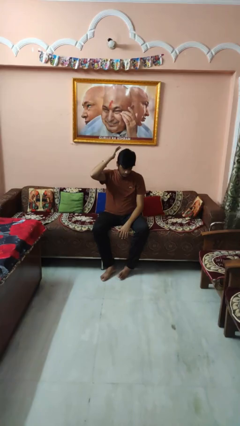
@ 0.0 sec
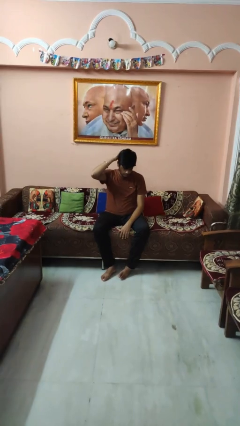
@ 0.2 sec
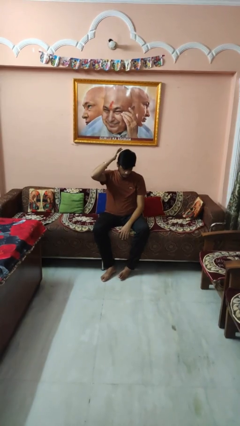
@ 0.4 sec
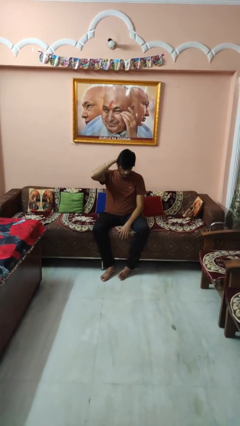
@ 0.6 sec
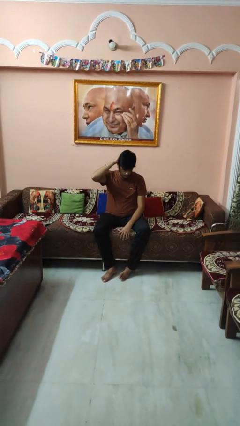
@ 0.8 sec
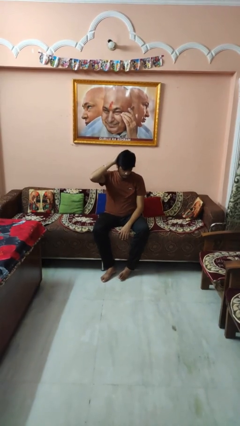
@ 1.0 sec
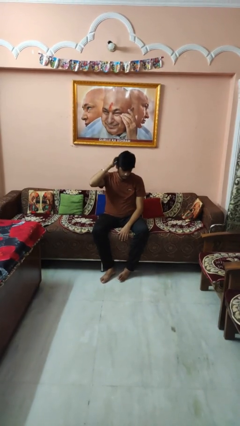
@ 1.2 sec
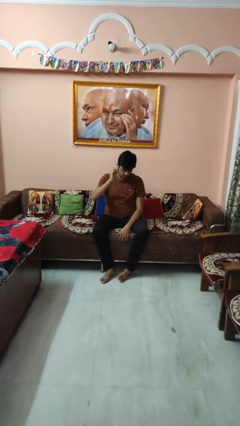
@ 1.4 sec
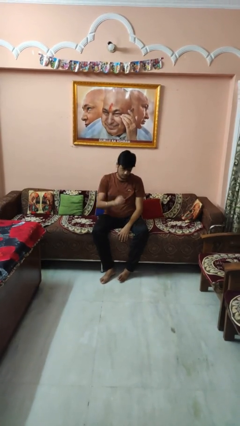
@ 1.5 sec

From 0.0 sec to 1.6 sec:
person pats head

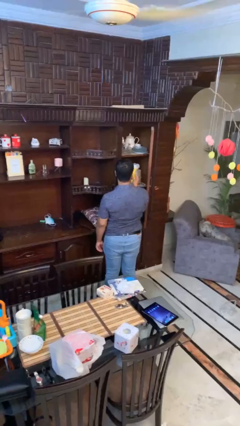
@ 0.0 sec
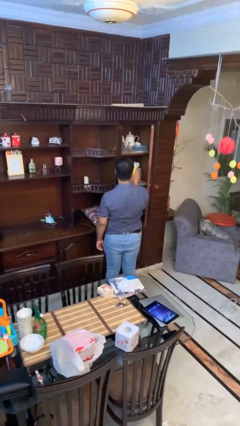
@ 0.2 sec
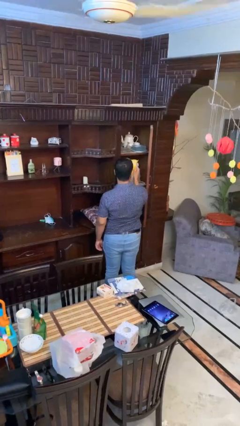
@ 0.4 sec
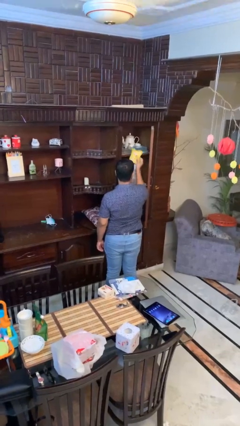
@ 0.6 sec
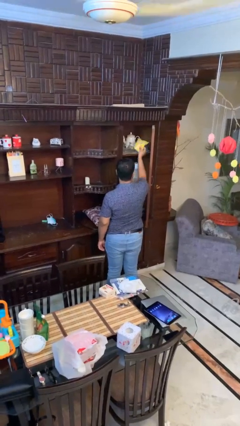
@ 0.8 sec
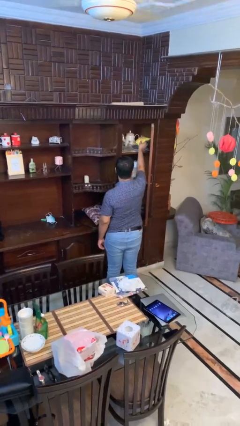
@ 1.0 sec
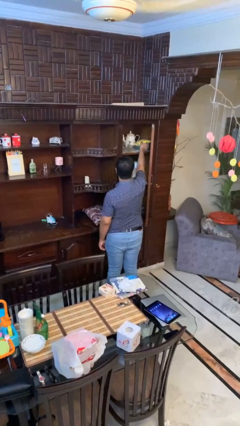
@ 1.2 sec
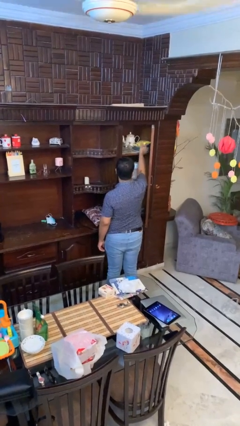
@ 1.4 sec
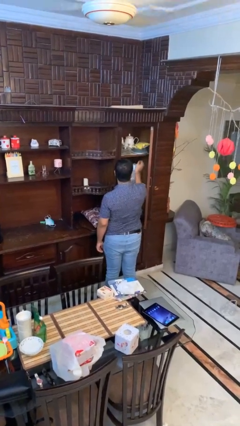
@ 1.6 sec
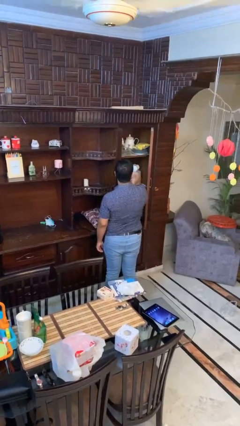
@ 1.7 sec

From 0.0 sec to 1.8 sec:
person puts down object into cabinet

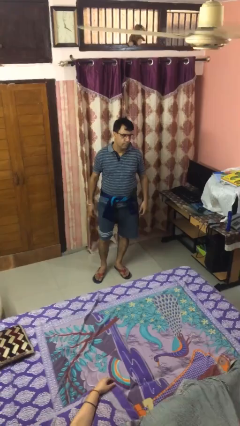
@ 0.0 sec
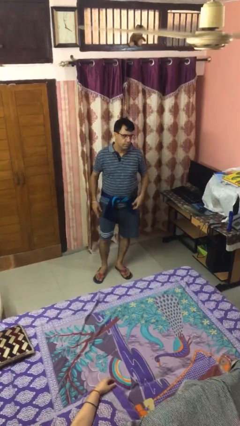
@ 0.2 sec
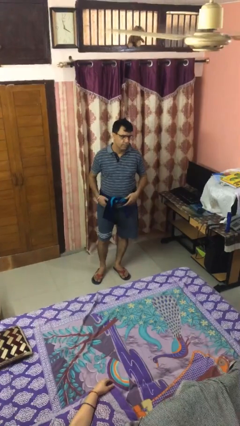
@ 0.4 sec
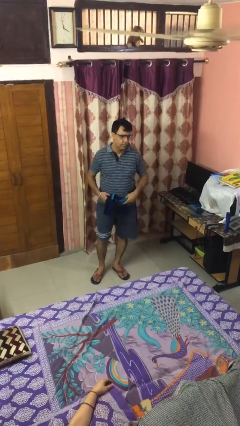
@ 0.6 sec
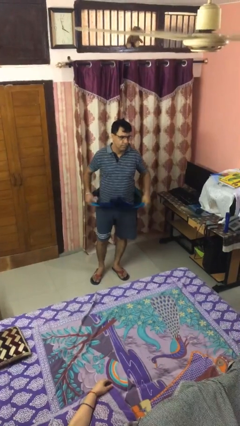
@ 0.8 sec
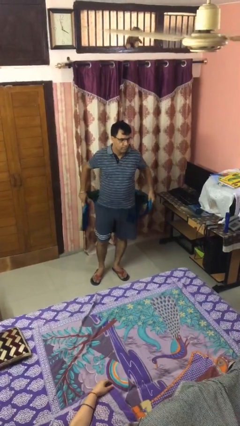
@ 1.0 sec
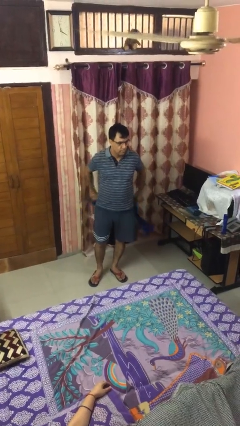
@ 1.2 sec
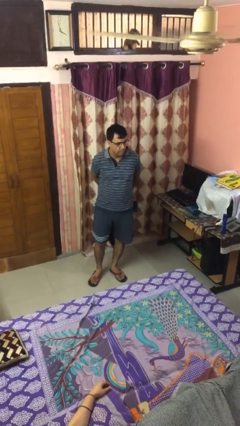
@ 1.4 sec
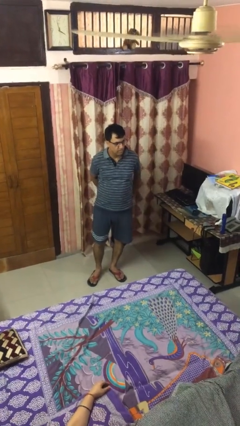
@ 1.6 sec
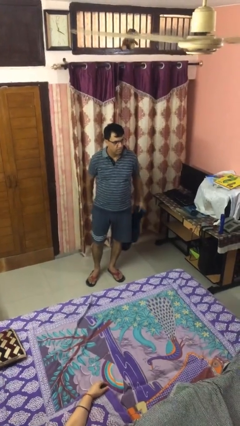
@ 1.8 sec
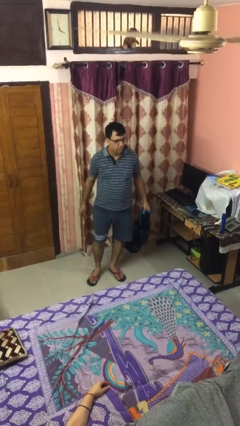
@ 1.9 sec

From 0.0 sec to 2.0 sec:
person unties jacket around waist

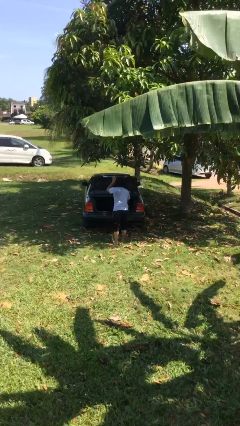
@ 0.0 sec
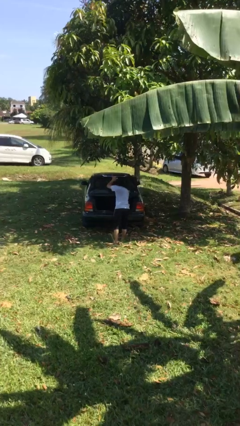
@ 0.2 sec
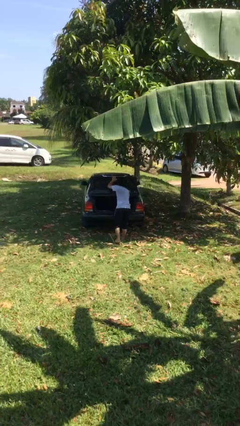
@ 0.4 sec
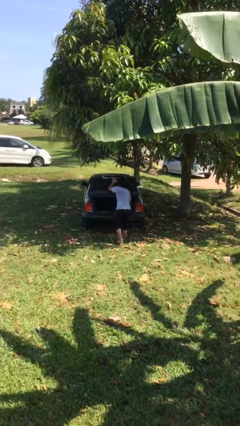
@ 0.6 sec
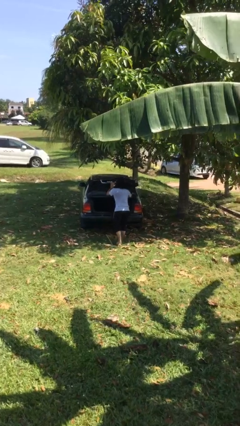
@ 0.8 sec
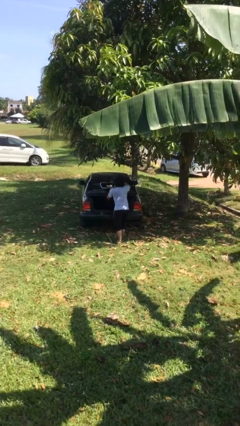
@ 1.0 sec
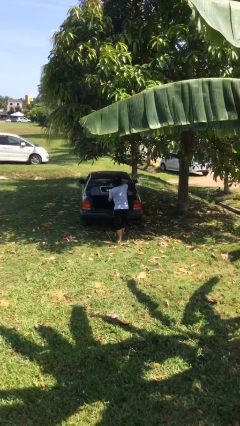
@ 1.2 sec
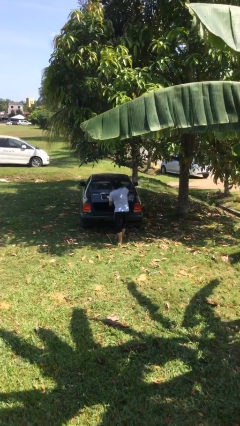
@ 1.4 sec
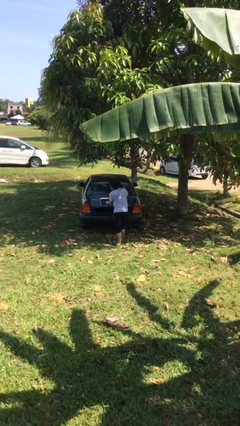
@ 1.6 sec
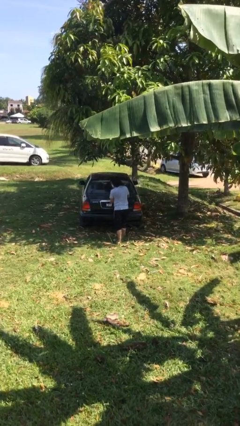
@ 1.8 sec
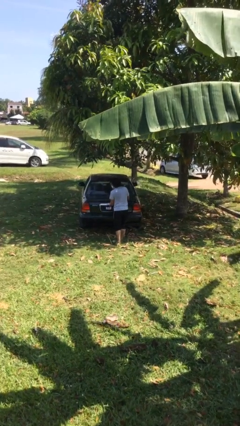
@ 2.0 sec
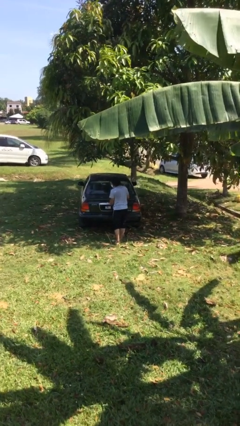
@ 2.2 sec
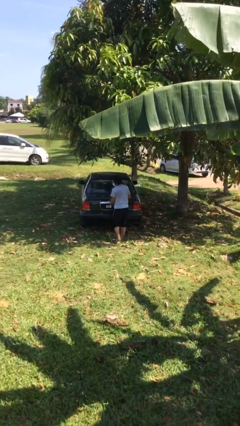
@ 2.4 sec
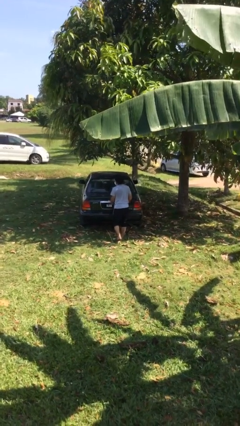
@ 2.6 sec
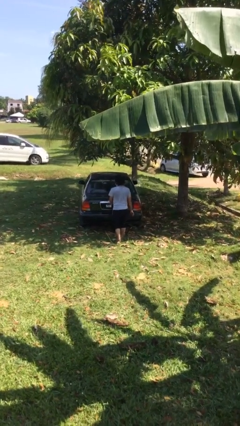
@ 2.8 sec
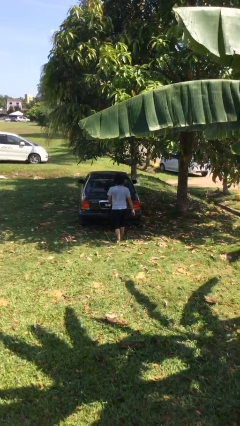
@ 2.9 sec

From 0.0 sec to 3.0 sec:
person closes car trunk

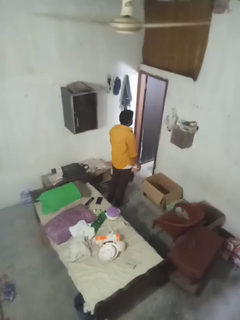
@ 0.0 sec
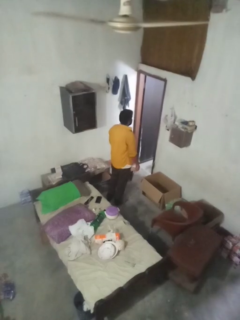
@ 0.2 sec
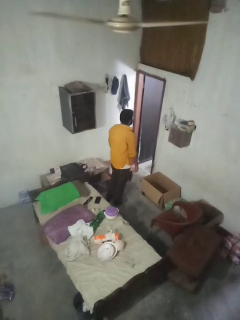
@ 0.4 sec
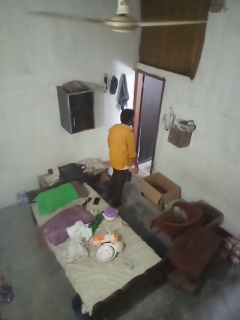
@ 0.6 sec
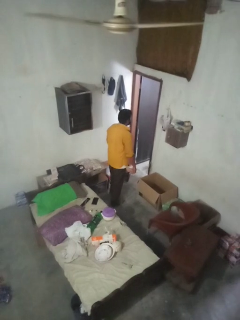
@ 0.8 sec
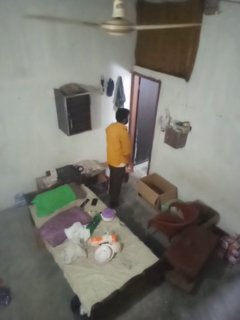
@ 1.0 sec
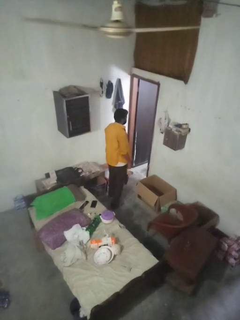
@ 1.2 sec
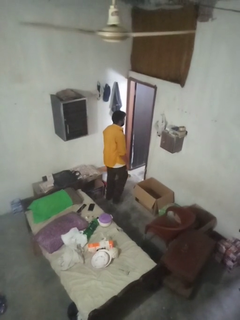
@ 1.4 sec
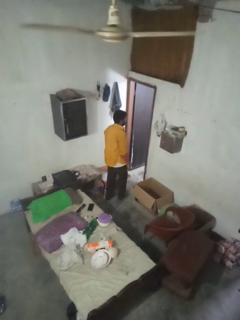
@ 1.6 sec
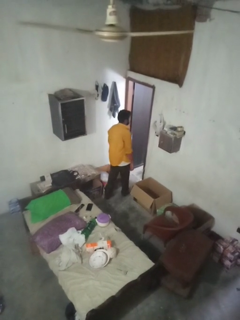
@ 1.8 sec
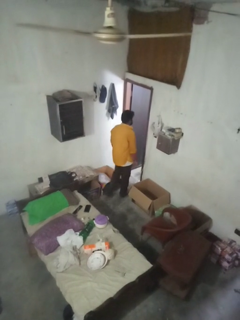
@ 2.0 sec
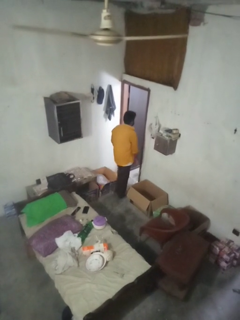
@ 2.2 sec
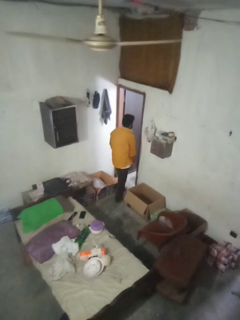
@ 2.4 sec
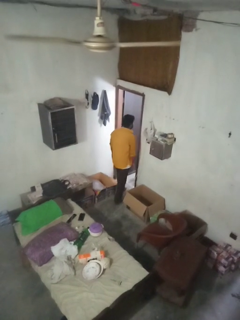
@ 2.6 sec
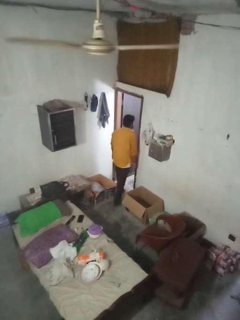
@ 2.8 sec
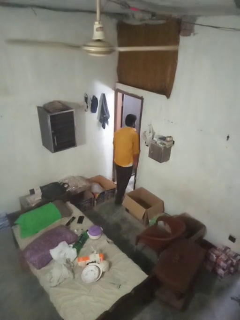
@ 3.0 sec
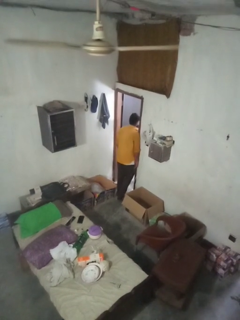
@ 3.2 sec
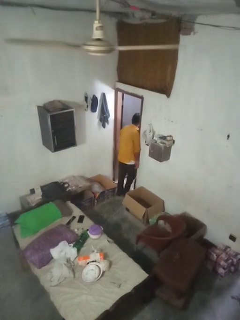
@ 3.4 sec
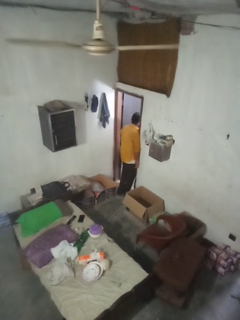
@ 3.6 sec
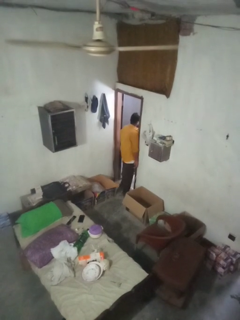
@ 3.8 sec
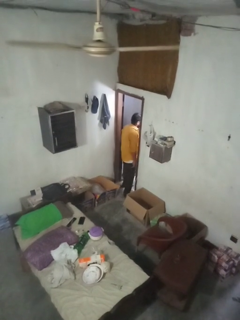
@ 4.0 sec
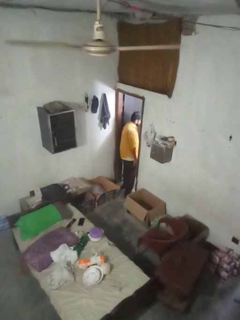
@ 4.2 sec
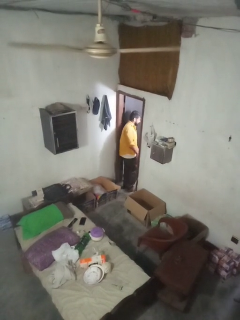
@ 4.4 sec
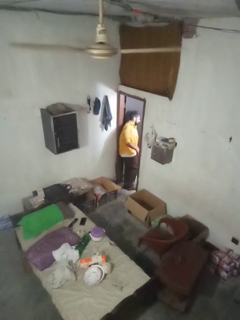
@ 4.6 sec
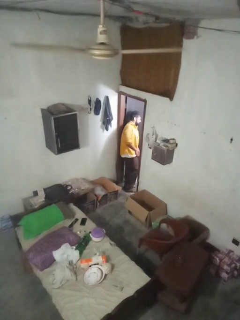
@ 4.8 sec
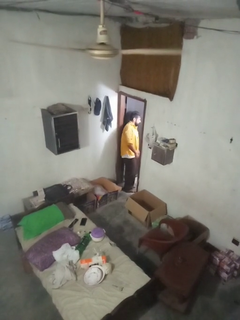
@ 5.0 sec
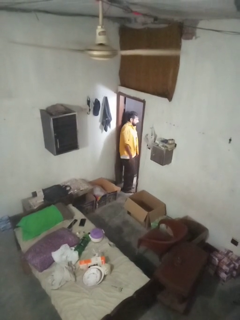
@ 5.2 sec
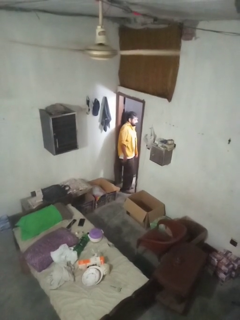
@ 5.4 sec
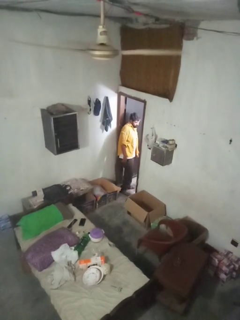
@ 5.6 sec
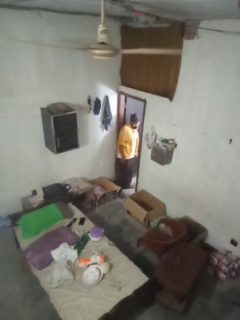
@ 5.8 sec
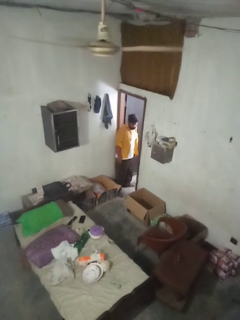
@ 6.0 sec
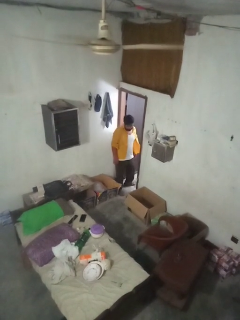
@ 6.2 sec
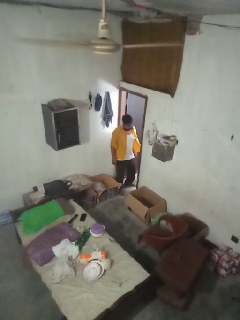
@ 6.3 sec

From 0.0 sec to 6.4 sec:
person bumps into wall

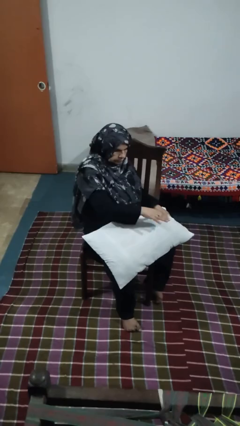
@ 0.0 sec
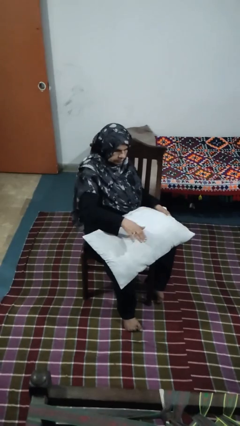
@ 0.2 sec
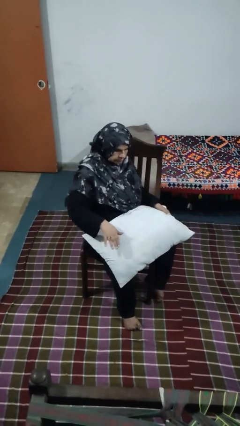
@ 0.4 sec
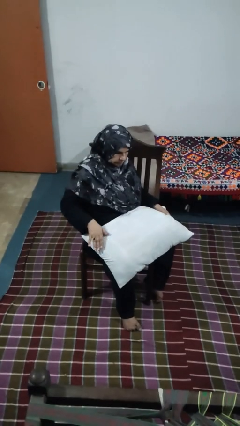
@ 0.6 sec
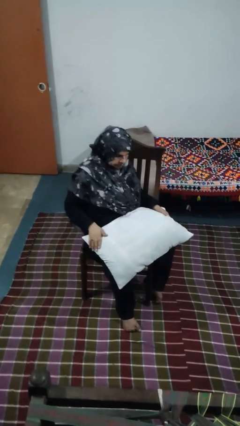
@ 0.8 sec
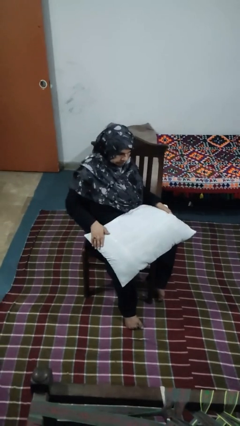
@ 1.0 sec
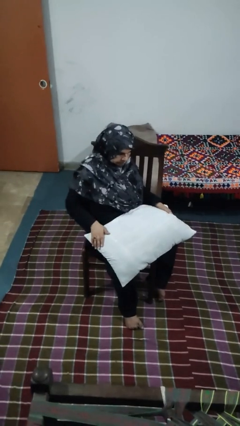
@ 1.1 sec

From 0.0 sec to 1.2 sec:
person waves hand over object

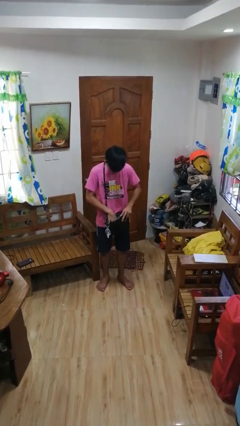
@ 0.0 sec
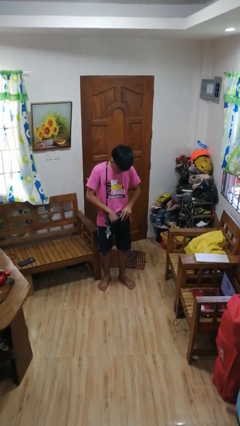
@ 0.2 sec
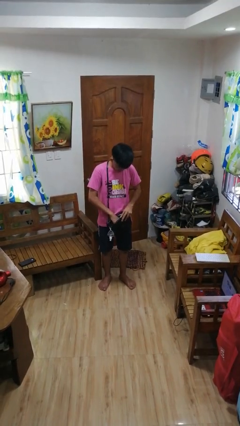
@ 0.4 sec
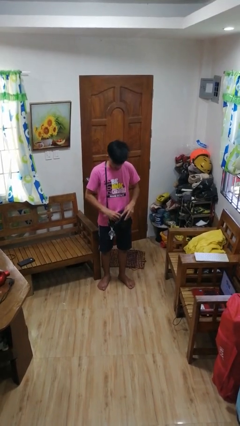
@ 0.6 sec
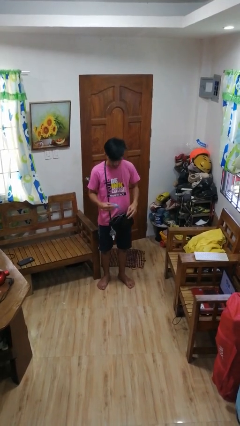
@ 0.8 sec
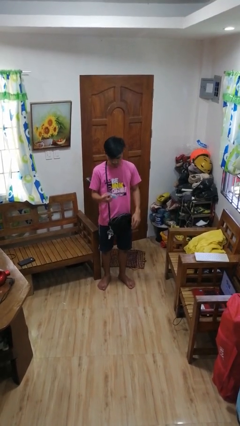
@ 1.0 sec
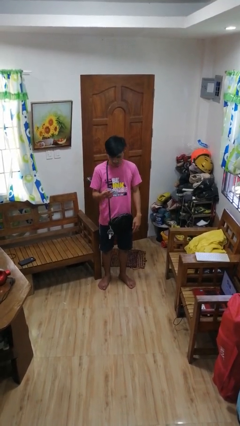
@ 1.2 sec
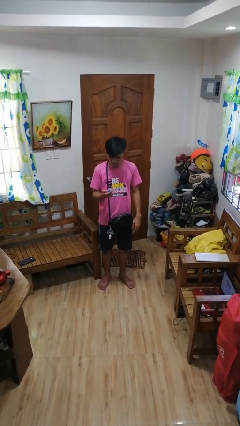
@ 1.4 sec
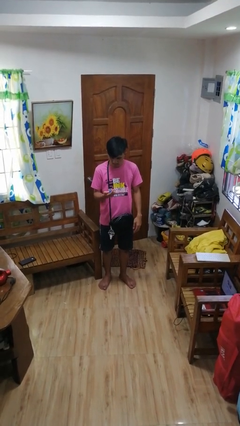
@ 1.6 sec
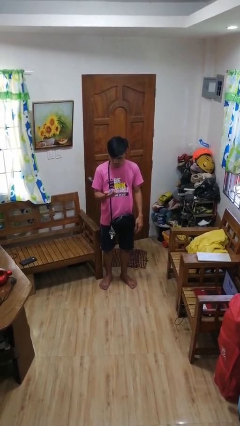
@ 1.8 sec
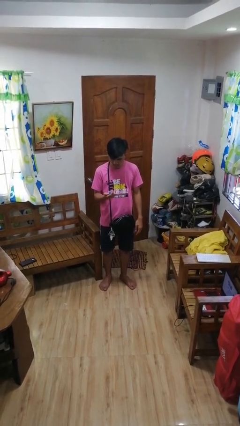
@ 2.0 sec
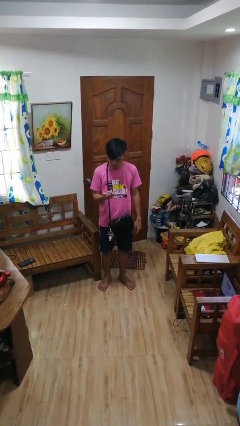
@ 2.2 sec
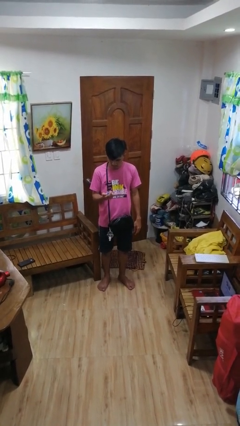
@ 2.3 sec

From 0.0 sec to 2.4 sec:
person takes object from purse
